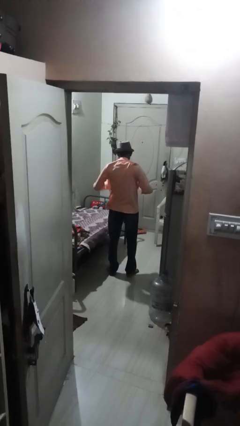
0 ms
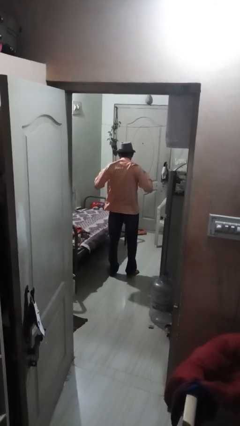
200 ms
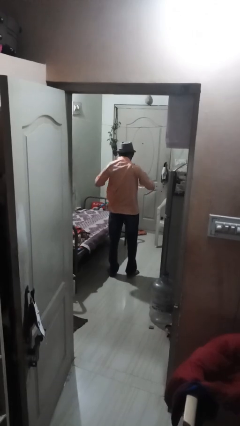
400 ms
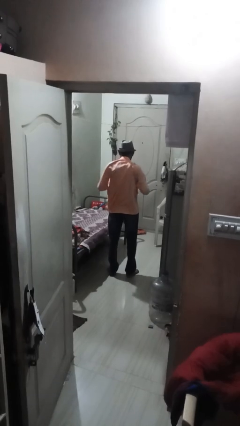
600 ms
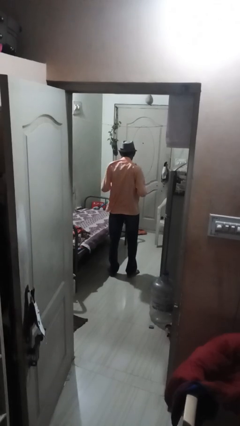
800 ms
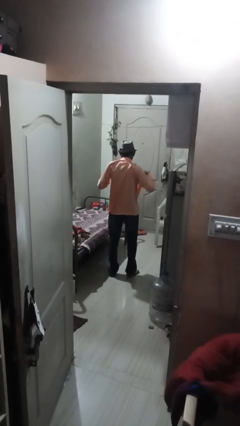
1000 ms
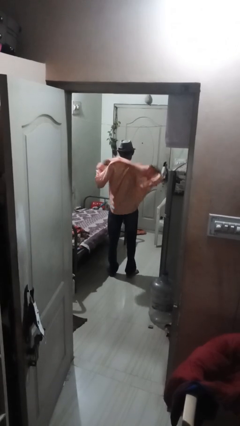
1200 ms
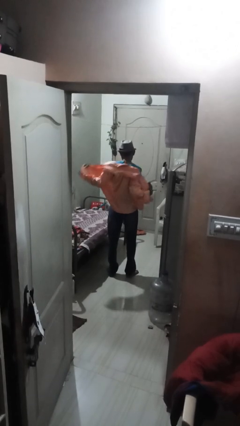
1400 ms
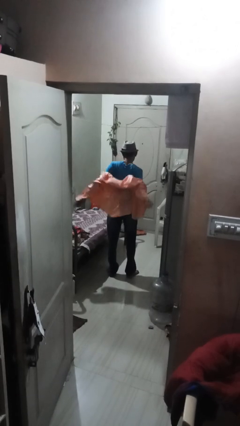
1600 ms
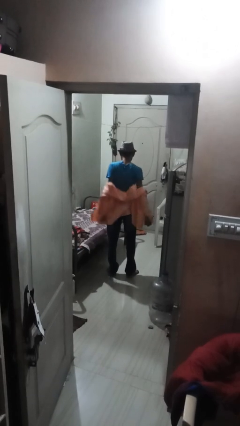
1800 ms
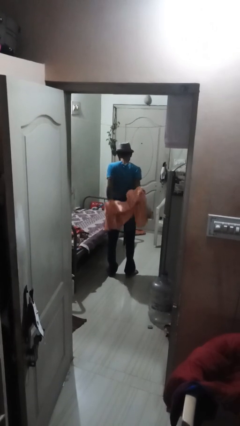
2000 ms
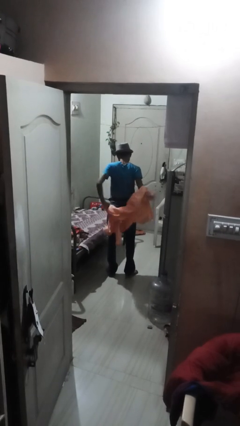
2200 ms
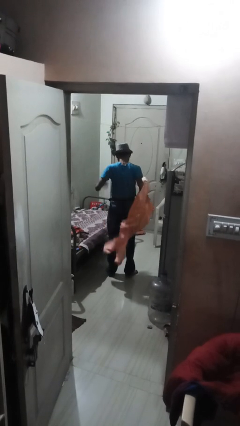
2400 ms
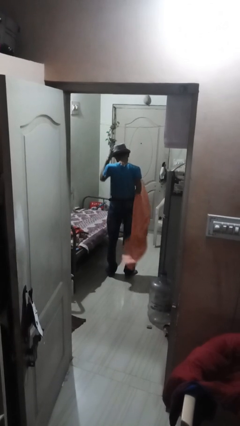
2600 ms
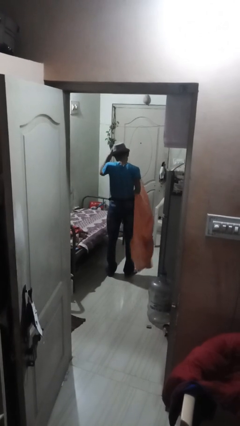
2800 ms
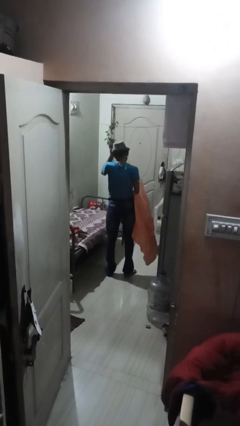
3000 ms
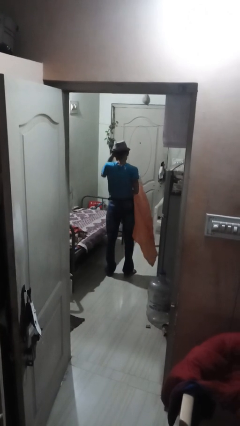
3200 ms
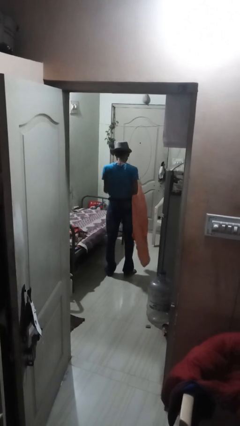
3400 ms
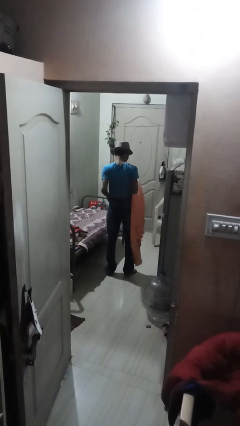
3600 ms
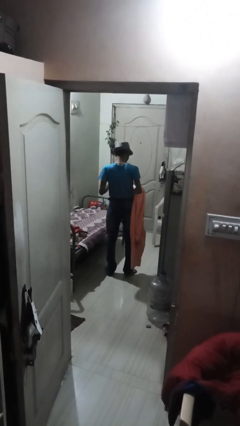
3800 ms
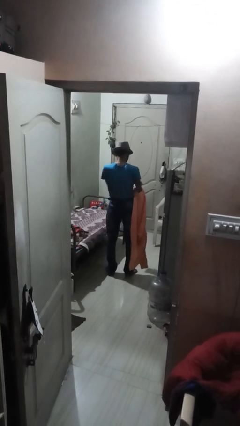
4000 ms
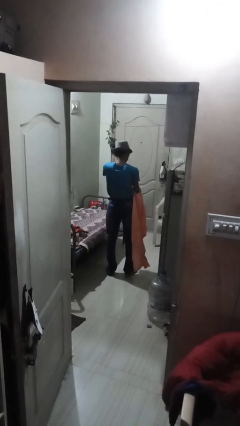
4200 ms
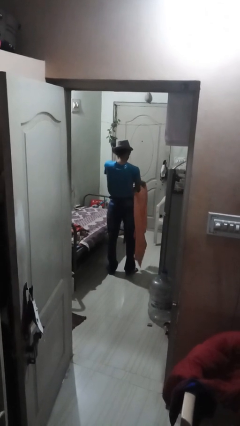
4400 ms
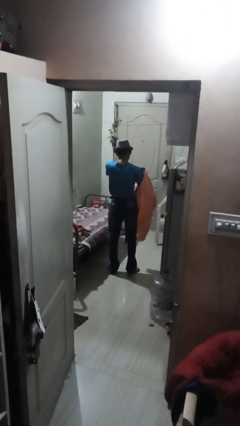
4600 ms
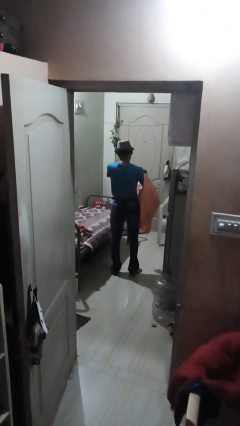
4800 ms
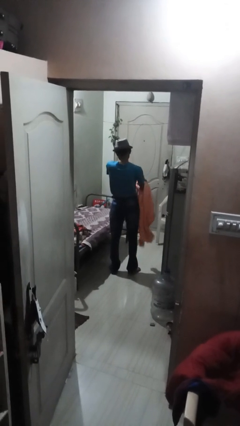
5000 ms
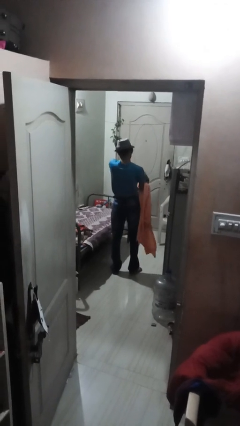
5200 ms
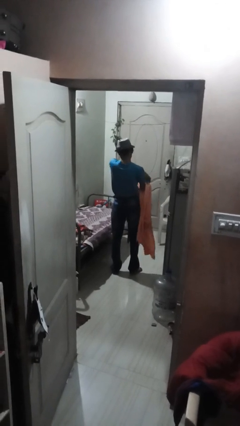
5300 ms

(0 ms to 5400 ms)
person takes off shirt

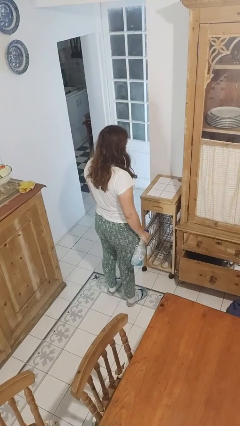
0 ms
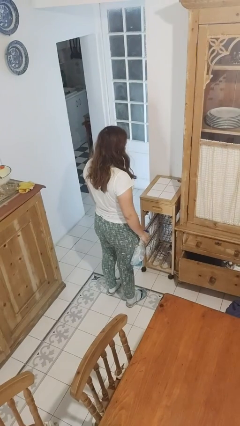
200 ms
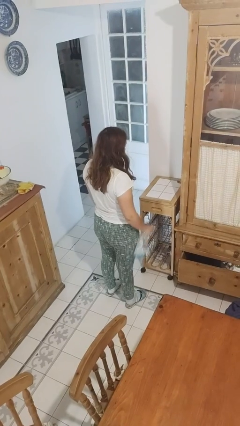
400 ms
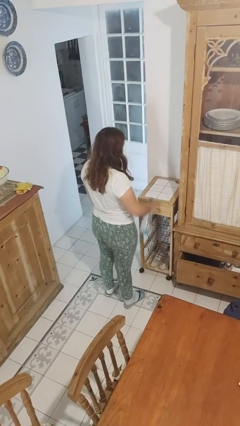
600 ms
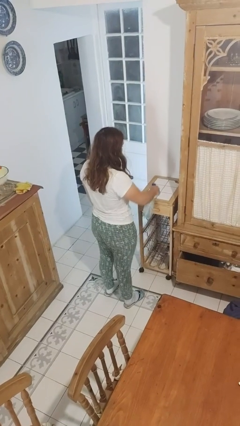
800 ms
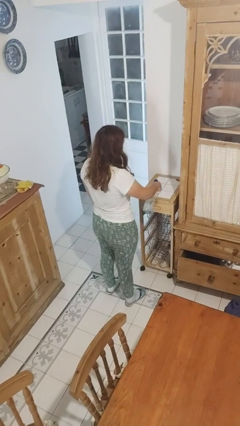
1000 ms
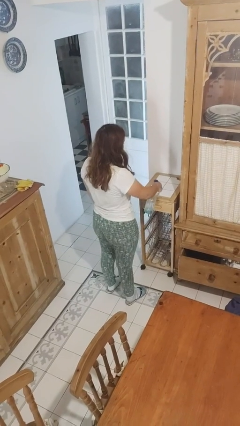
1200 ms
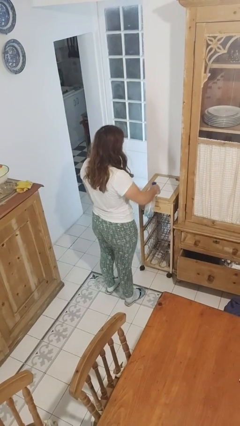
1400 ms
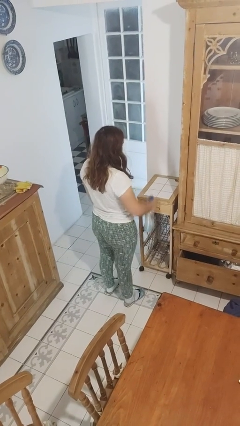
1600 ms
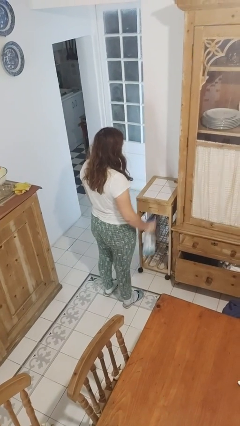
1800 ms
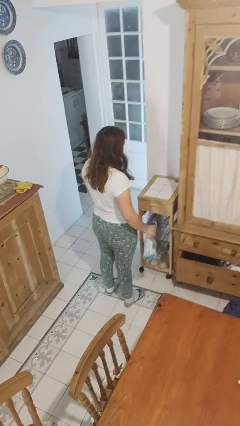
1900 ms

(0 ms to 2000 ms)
person sprays from bottle

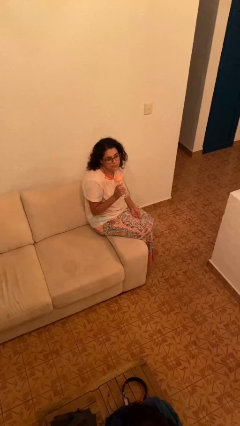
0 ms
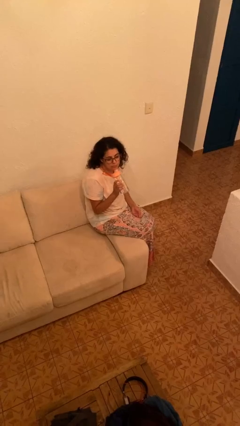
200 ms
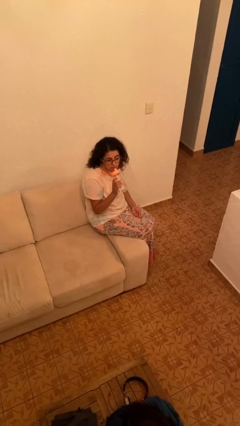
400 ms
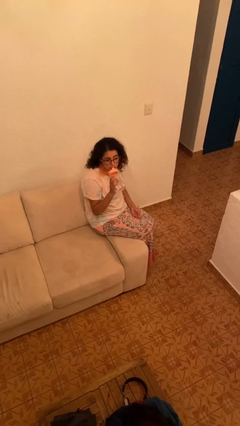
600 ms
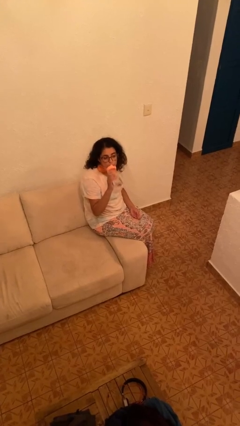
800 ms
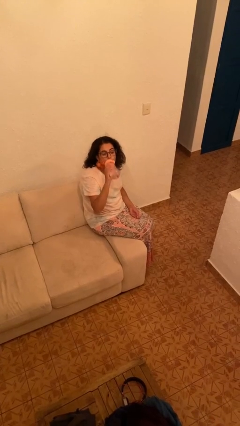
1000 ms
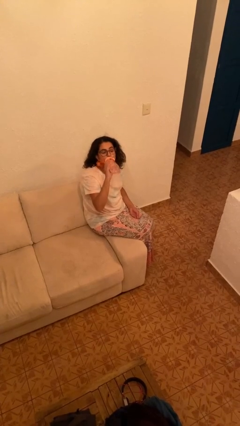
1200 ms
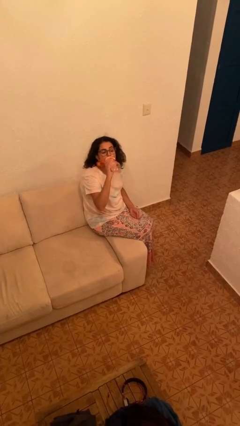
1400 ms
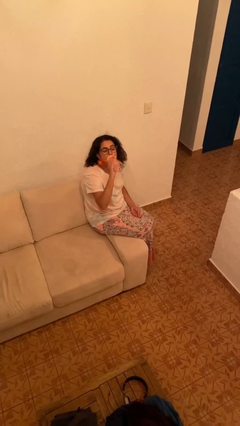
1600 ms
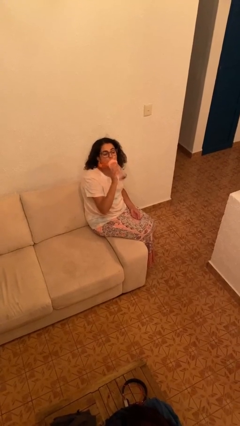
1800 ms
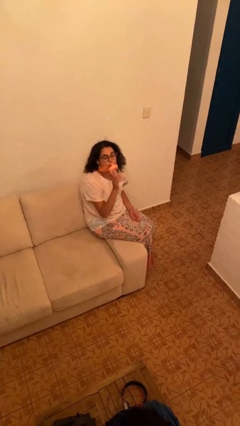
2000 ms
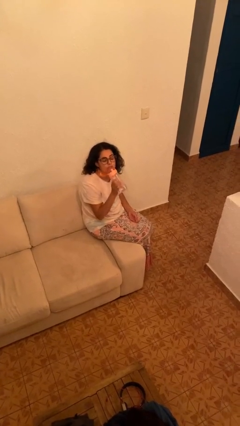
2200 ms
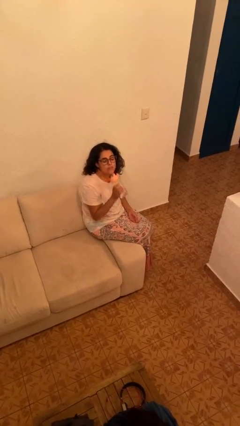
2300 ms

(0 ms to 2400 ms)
person drinks from bottle

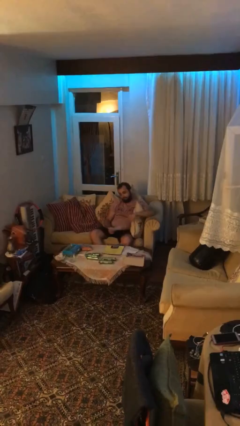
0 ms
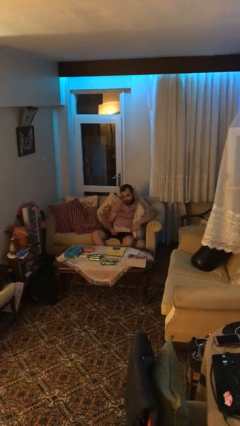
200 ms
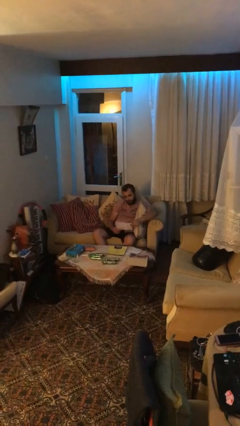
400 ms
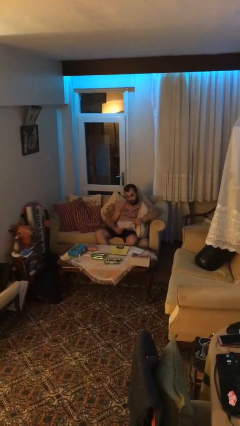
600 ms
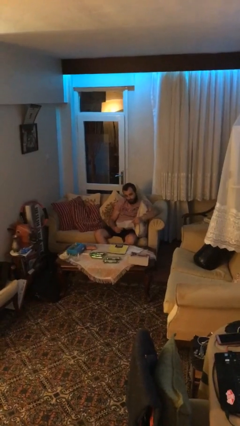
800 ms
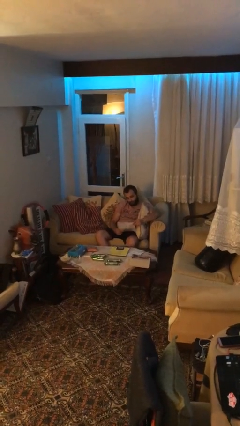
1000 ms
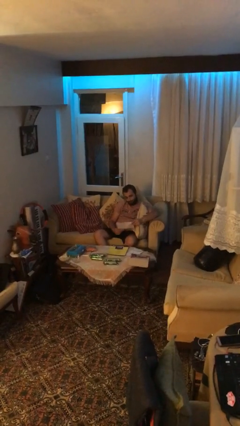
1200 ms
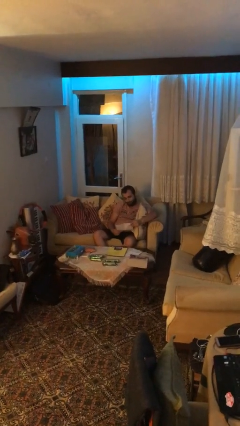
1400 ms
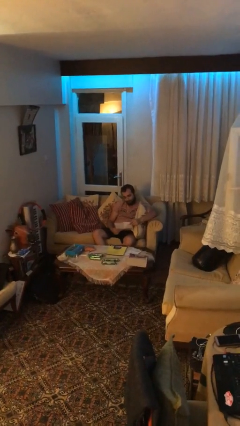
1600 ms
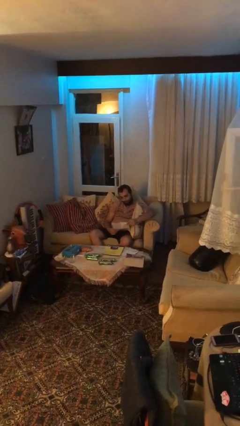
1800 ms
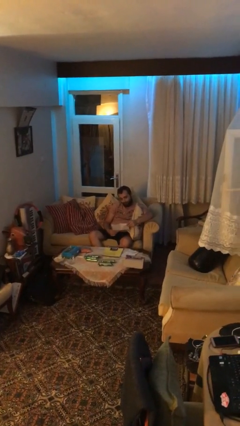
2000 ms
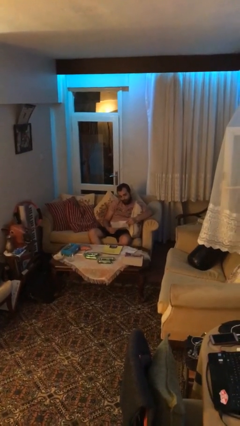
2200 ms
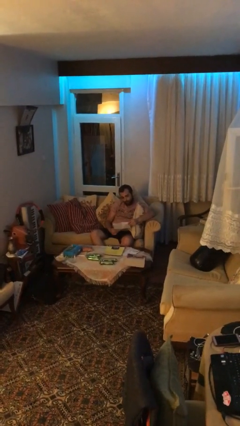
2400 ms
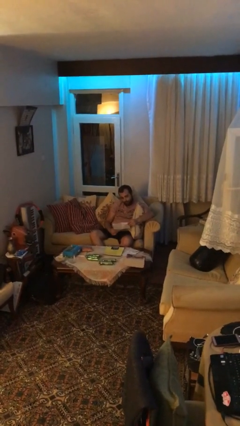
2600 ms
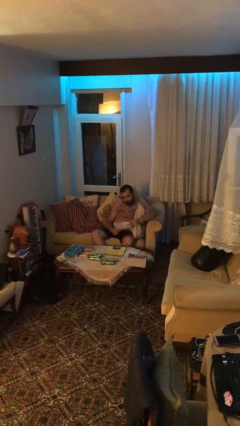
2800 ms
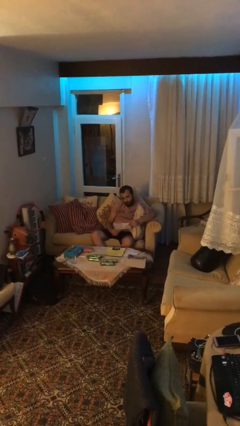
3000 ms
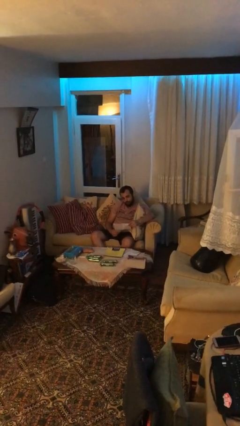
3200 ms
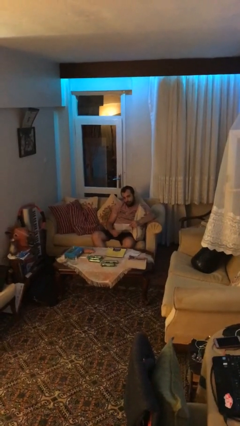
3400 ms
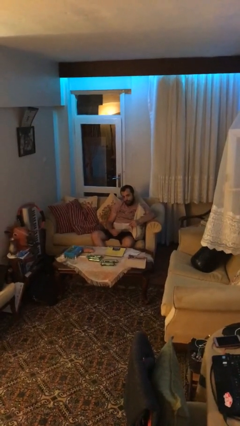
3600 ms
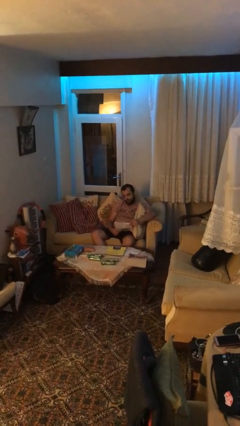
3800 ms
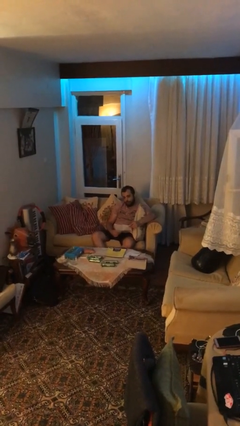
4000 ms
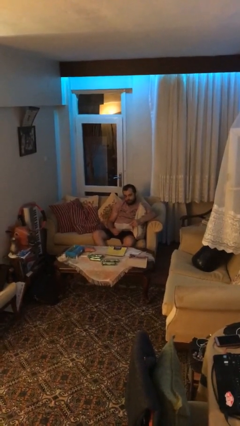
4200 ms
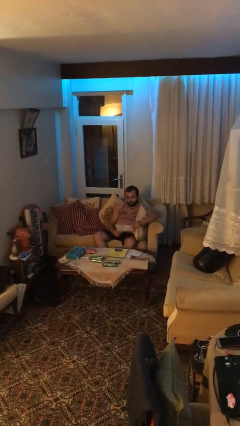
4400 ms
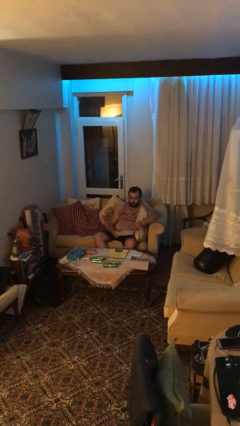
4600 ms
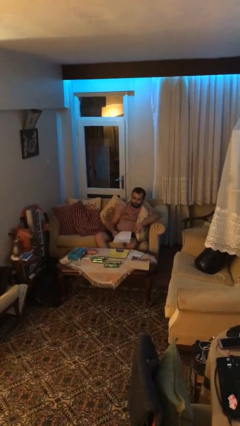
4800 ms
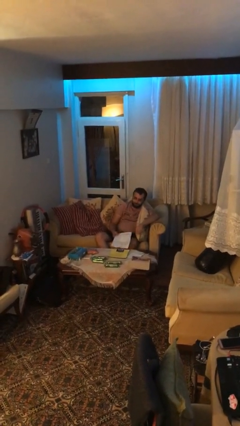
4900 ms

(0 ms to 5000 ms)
person reads document

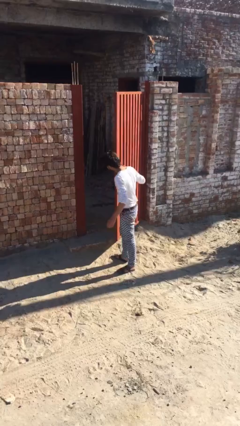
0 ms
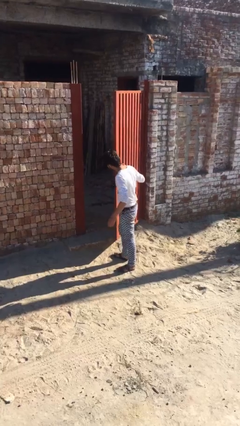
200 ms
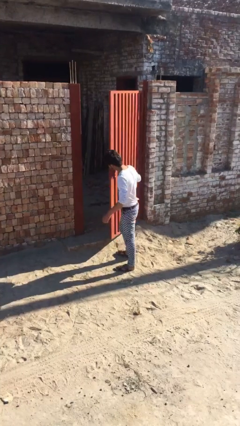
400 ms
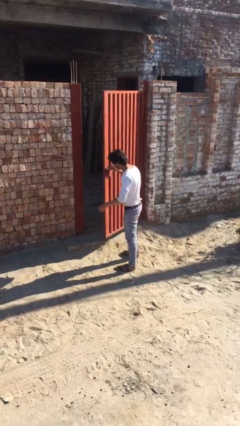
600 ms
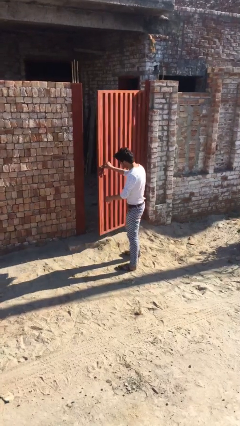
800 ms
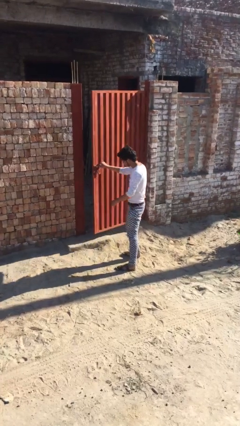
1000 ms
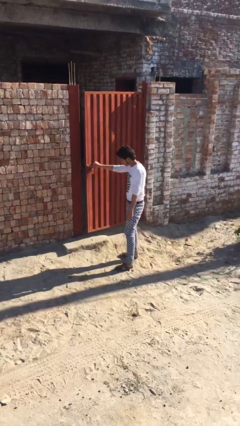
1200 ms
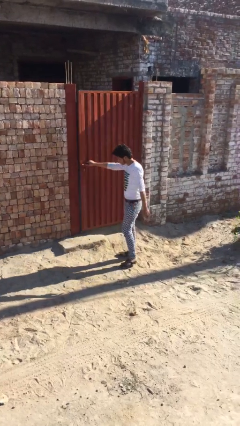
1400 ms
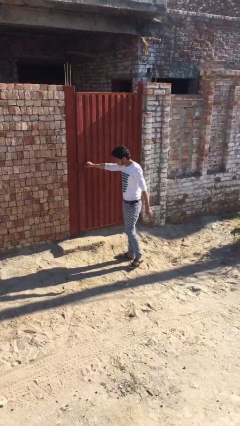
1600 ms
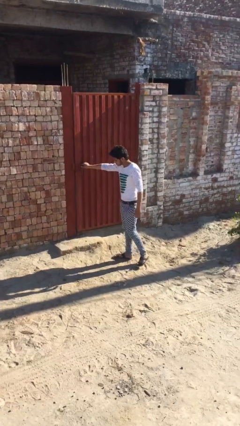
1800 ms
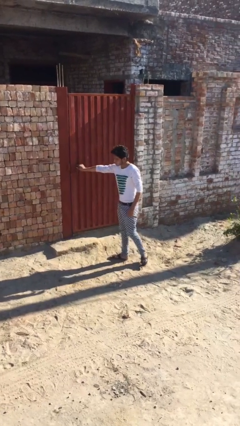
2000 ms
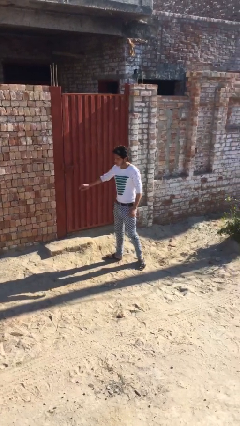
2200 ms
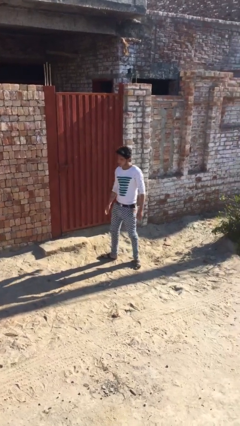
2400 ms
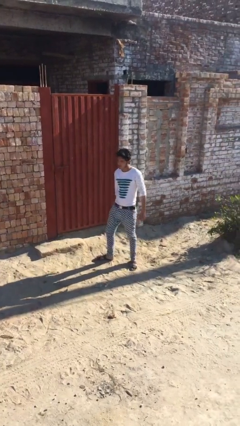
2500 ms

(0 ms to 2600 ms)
person closes facility door
